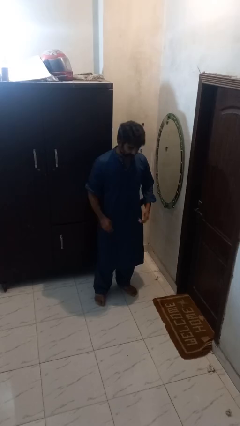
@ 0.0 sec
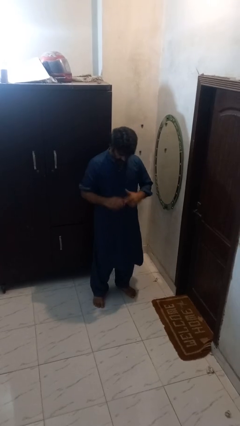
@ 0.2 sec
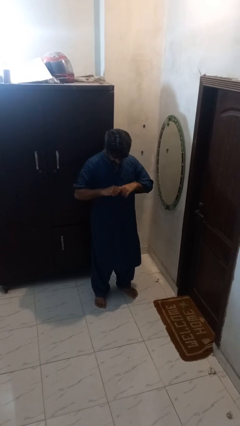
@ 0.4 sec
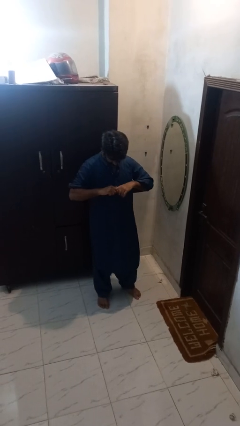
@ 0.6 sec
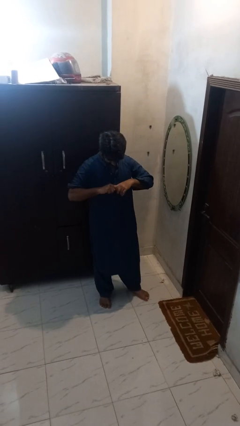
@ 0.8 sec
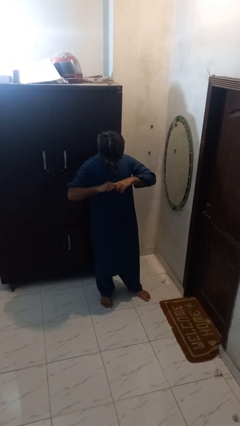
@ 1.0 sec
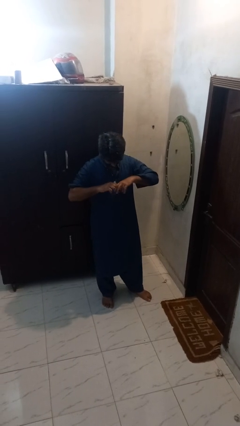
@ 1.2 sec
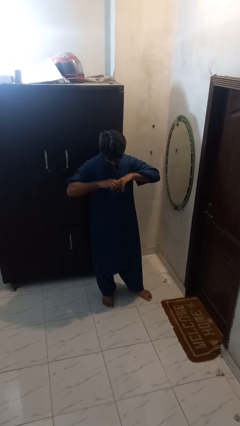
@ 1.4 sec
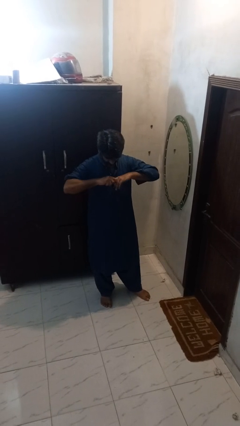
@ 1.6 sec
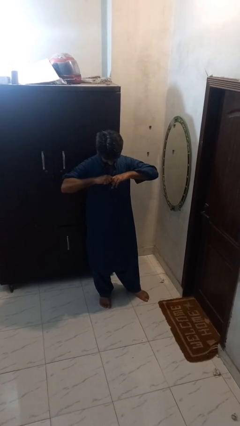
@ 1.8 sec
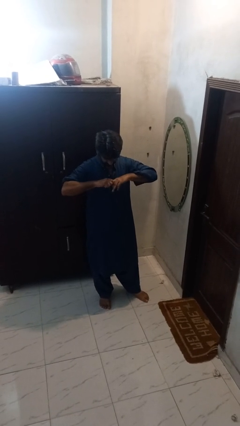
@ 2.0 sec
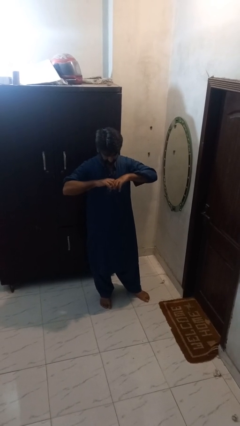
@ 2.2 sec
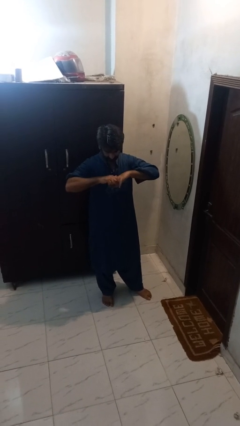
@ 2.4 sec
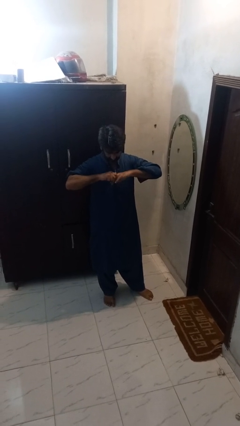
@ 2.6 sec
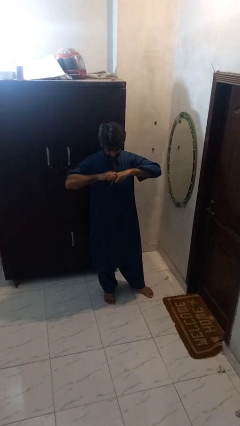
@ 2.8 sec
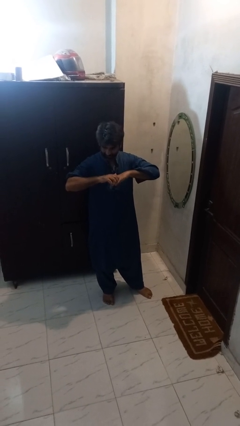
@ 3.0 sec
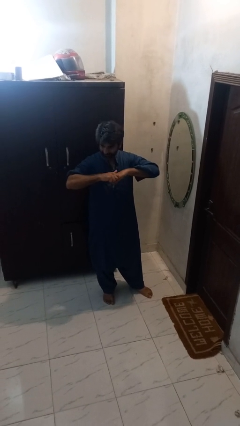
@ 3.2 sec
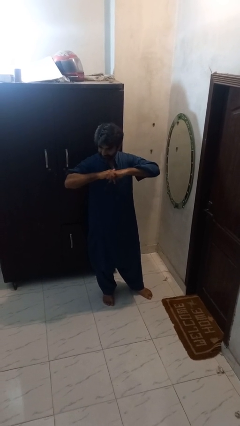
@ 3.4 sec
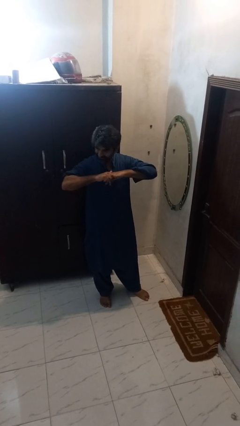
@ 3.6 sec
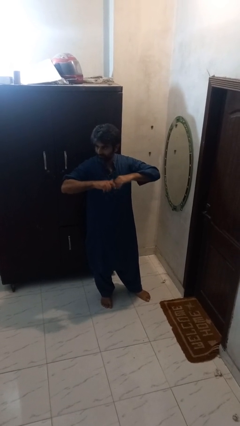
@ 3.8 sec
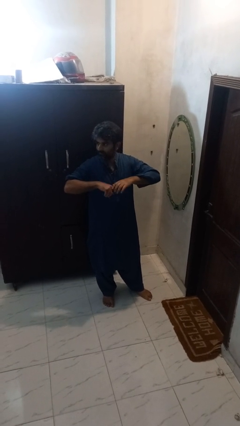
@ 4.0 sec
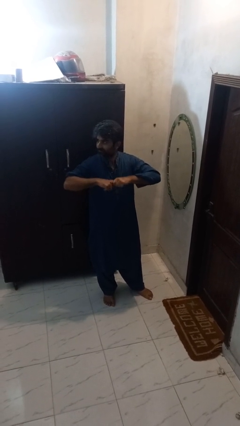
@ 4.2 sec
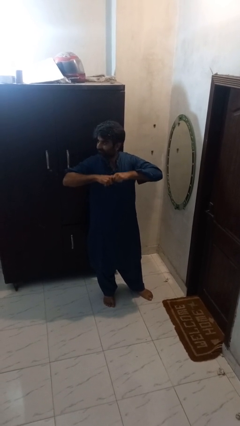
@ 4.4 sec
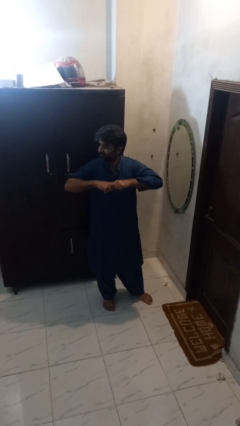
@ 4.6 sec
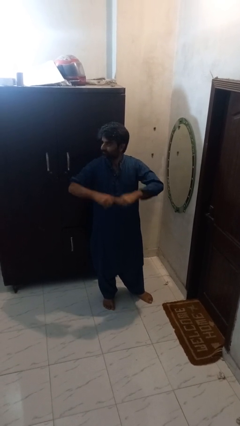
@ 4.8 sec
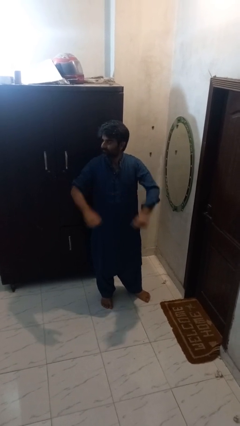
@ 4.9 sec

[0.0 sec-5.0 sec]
person cracks knuckles

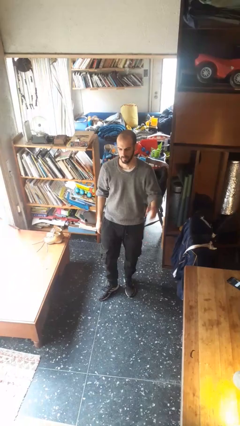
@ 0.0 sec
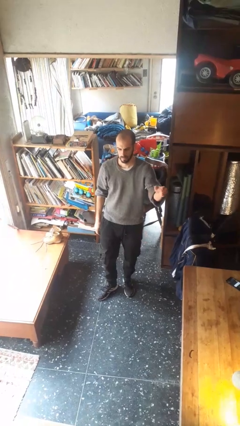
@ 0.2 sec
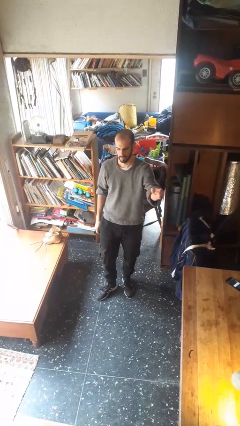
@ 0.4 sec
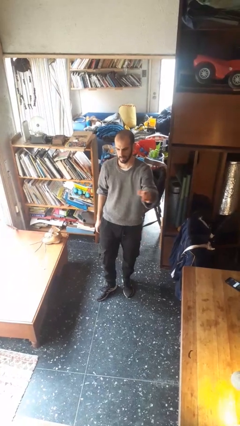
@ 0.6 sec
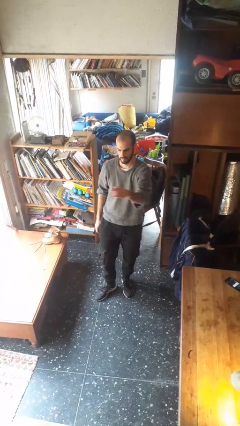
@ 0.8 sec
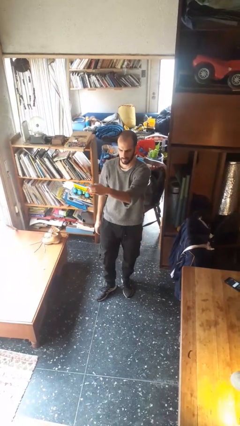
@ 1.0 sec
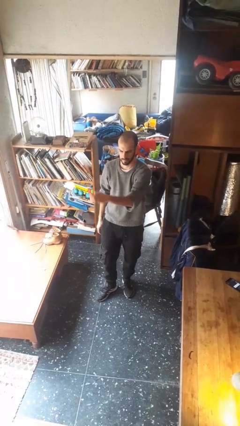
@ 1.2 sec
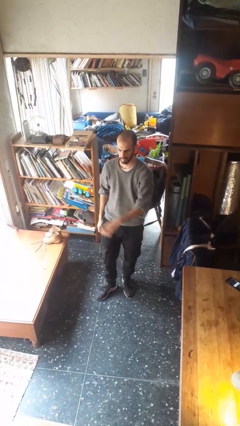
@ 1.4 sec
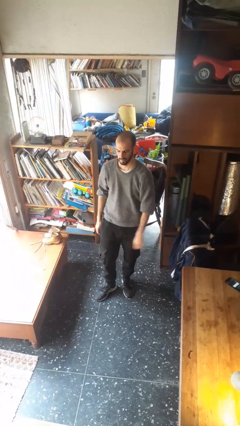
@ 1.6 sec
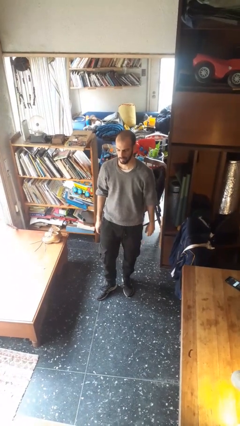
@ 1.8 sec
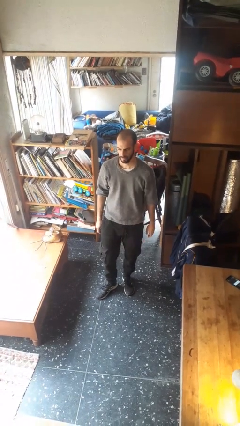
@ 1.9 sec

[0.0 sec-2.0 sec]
person gestures swipe right

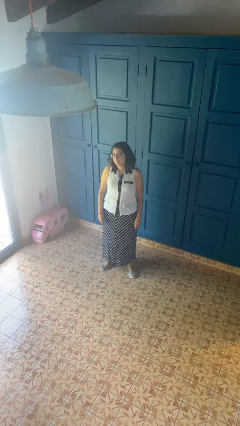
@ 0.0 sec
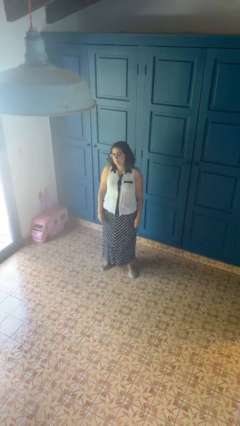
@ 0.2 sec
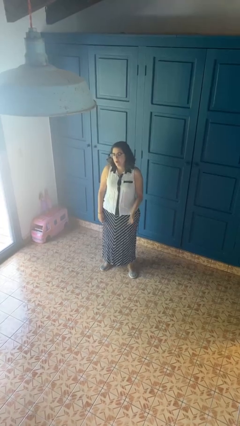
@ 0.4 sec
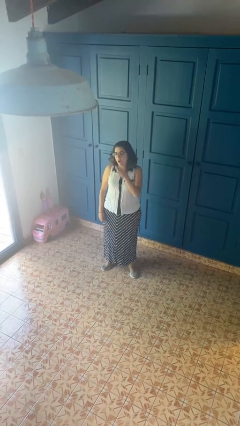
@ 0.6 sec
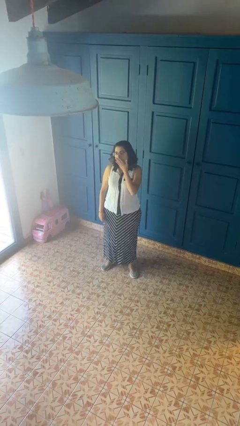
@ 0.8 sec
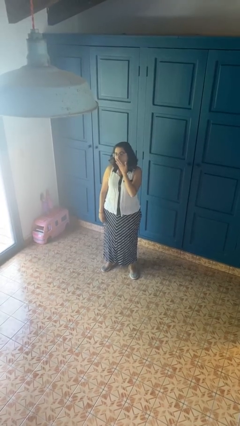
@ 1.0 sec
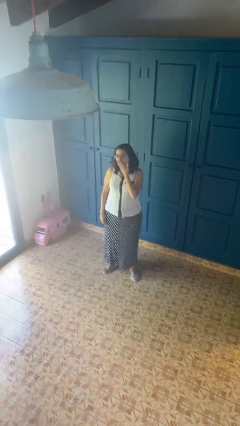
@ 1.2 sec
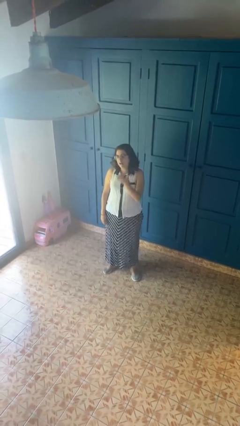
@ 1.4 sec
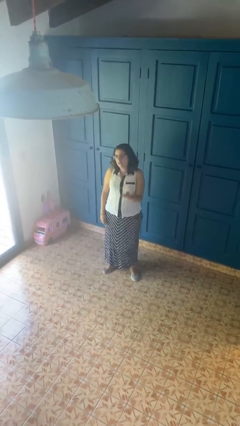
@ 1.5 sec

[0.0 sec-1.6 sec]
person yawns

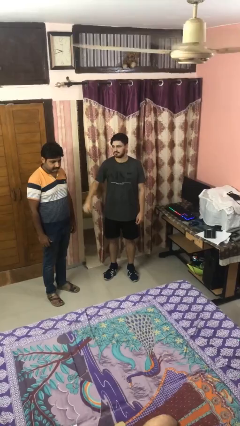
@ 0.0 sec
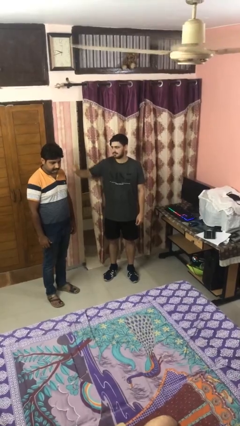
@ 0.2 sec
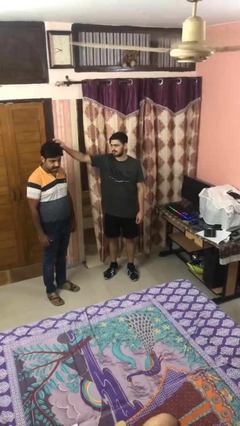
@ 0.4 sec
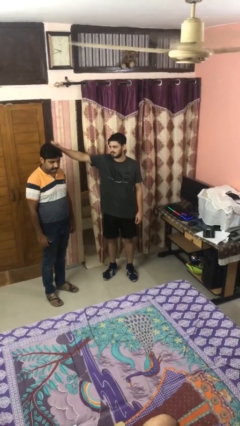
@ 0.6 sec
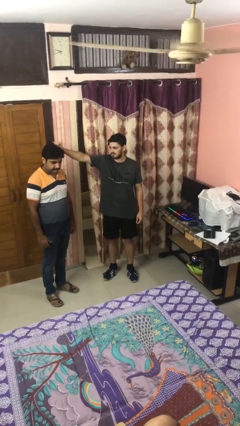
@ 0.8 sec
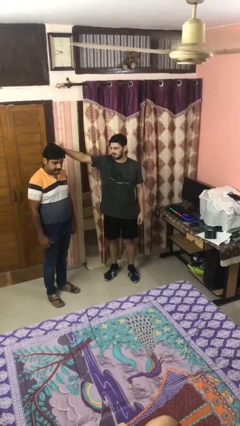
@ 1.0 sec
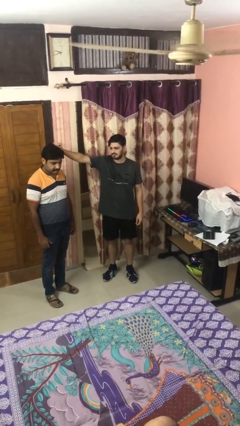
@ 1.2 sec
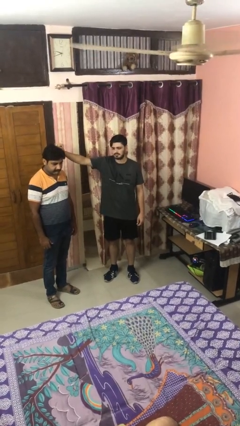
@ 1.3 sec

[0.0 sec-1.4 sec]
person grabs person by hair

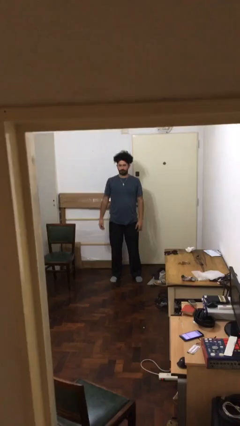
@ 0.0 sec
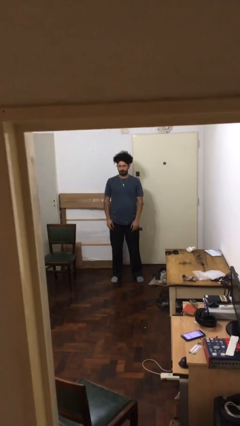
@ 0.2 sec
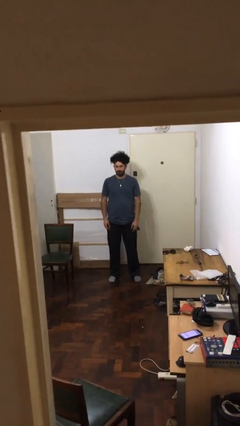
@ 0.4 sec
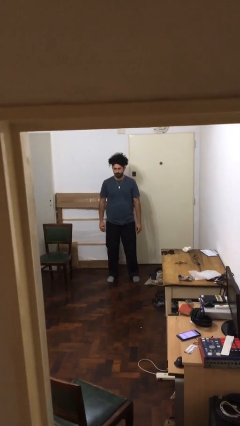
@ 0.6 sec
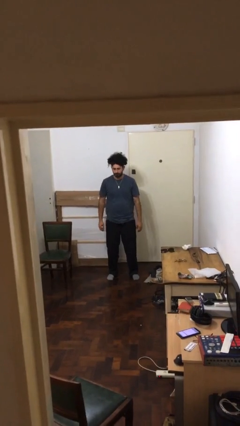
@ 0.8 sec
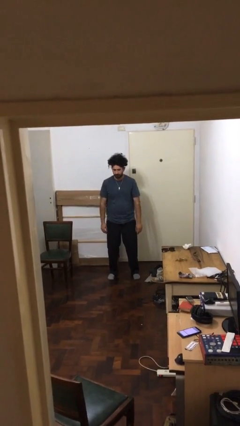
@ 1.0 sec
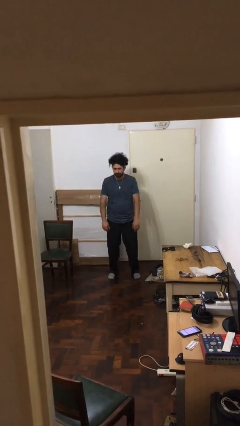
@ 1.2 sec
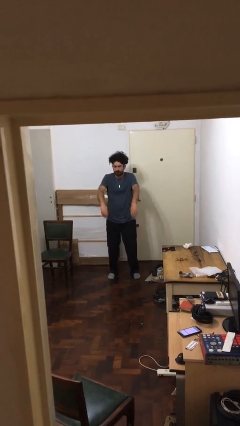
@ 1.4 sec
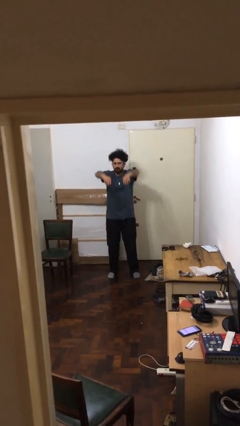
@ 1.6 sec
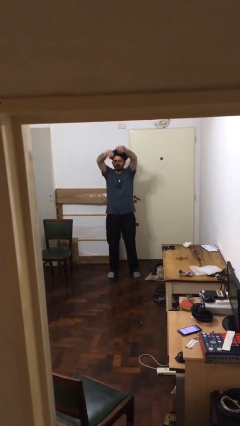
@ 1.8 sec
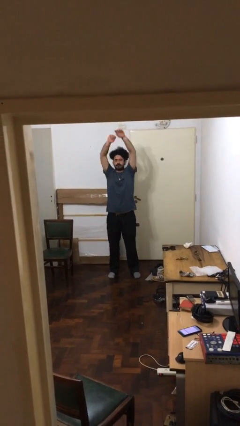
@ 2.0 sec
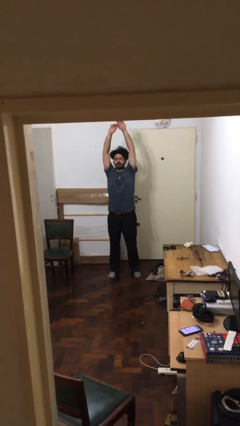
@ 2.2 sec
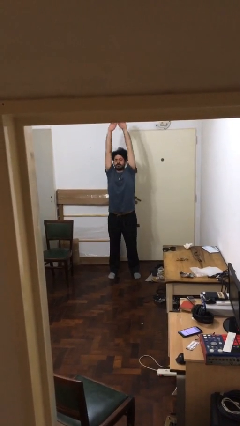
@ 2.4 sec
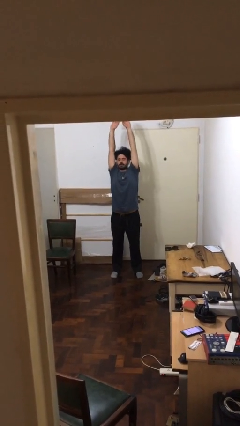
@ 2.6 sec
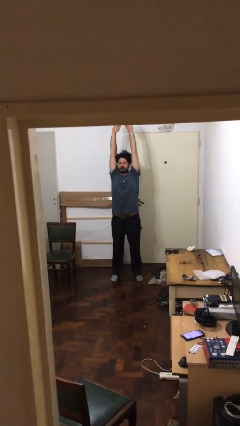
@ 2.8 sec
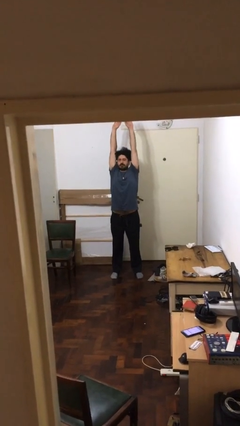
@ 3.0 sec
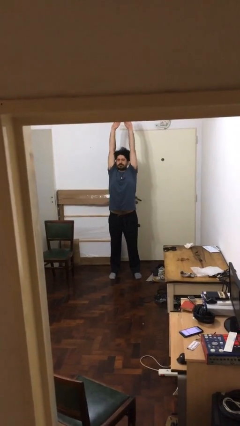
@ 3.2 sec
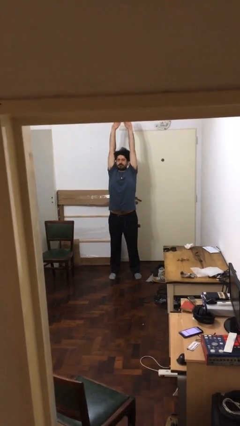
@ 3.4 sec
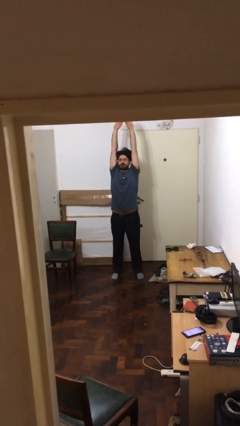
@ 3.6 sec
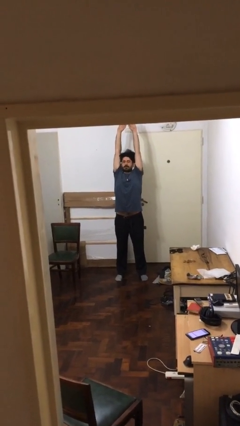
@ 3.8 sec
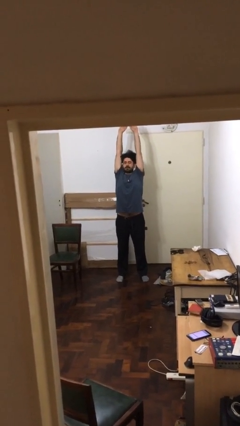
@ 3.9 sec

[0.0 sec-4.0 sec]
person stretches arms over head

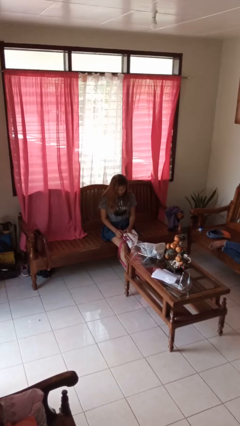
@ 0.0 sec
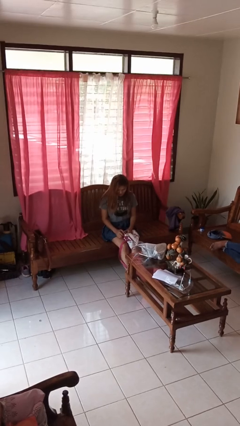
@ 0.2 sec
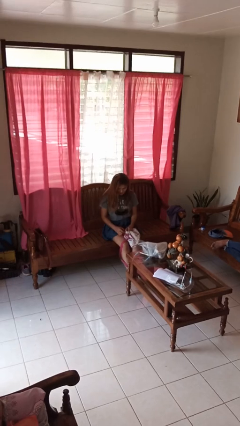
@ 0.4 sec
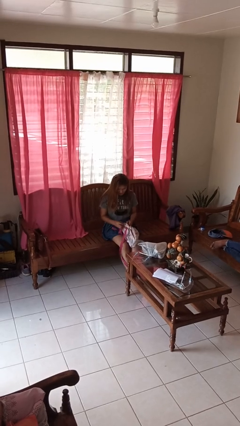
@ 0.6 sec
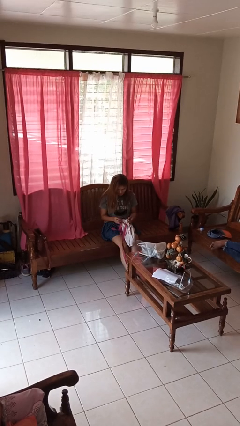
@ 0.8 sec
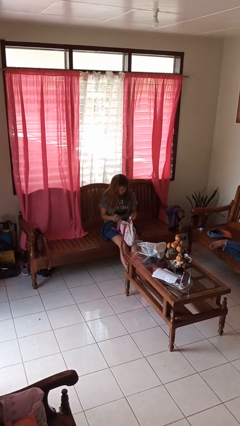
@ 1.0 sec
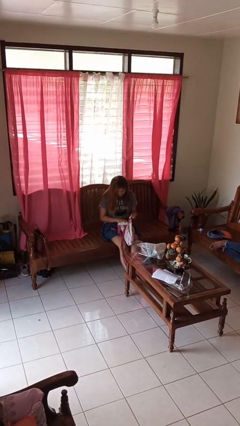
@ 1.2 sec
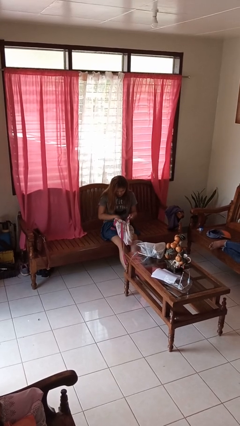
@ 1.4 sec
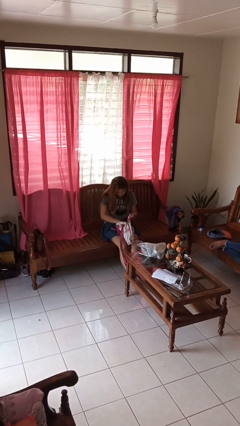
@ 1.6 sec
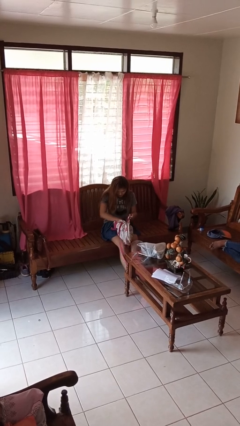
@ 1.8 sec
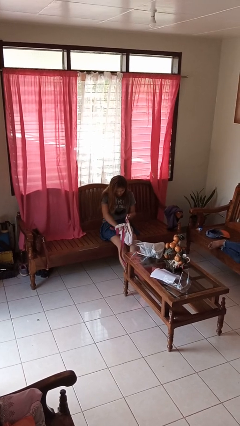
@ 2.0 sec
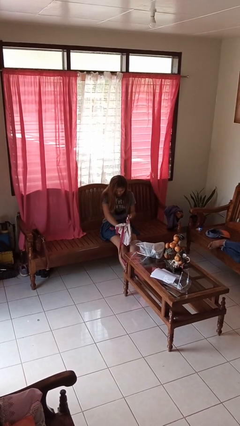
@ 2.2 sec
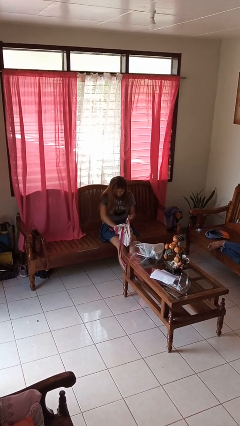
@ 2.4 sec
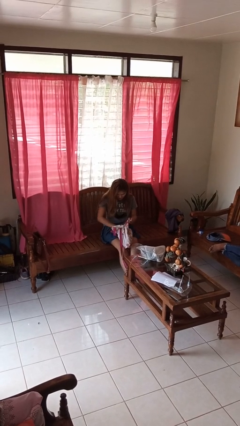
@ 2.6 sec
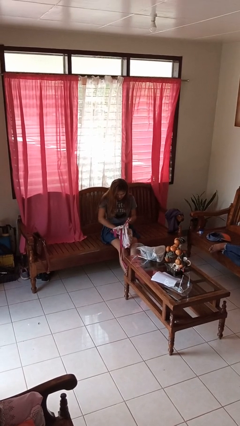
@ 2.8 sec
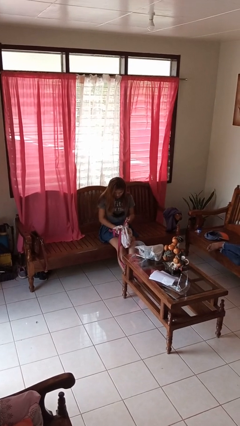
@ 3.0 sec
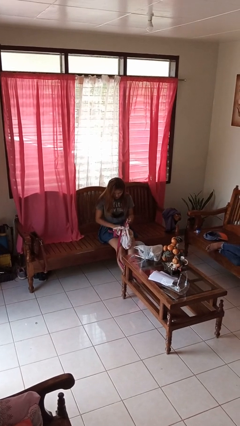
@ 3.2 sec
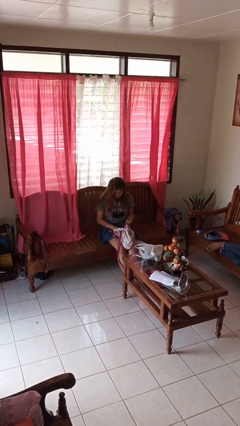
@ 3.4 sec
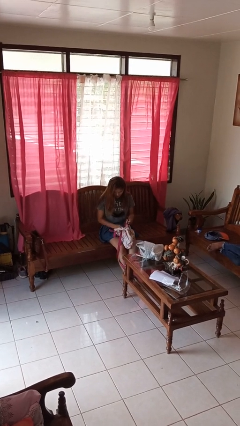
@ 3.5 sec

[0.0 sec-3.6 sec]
person searches in backpack
